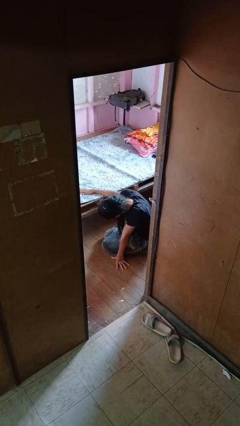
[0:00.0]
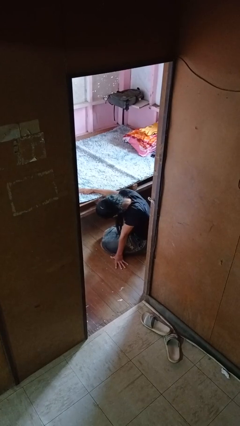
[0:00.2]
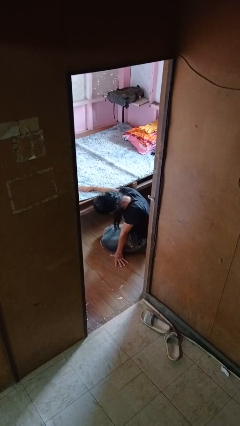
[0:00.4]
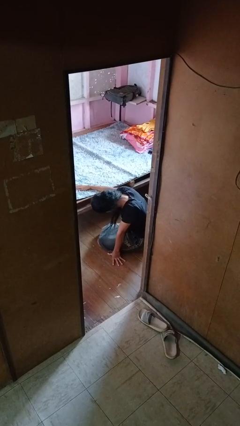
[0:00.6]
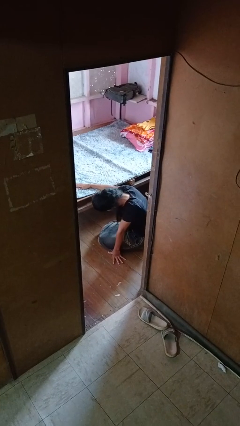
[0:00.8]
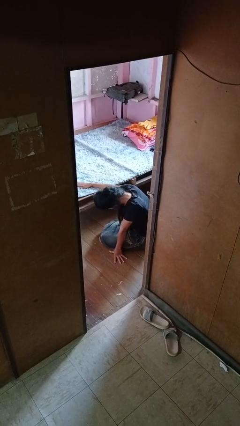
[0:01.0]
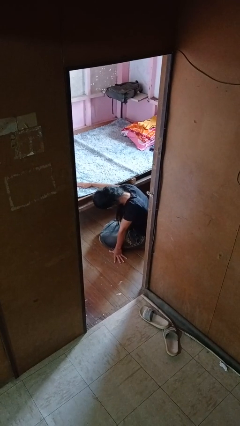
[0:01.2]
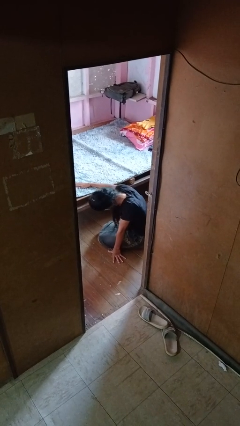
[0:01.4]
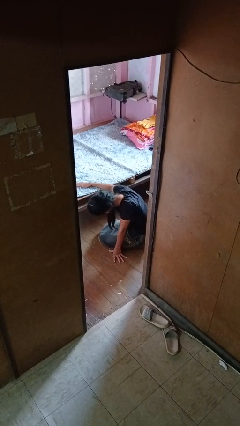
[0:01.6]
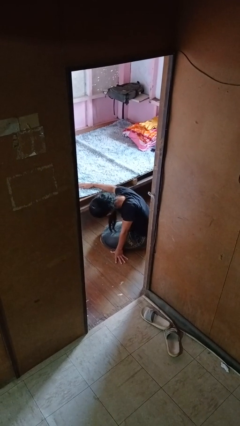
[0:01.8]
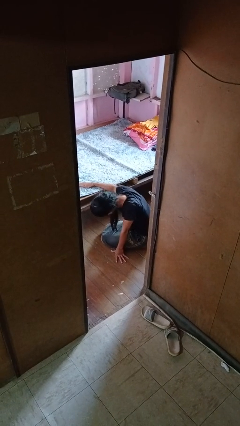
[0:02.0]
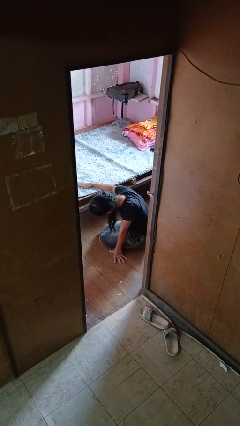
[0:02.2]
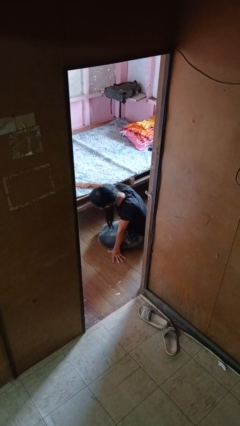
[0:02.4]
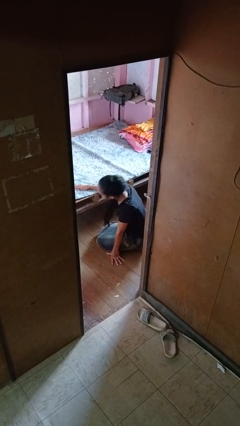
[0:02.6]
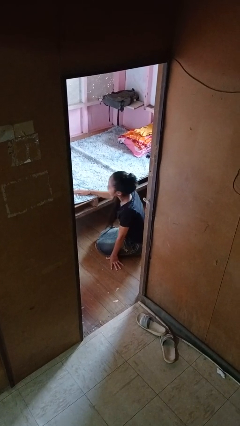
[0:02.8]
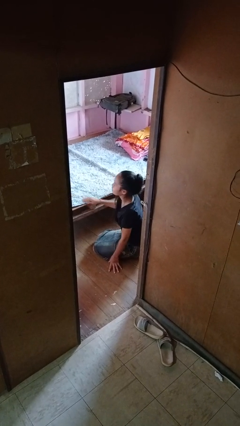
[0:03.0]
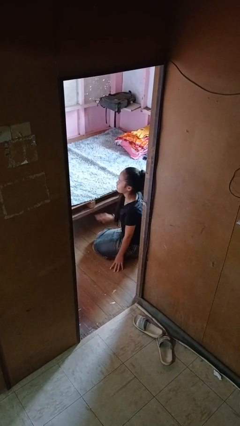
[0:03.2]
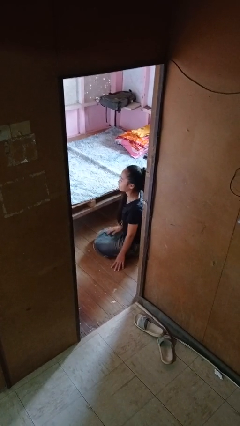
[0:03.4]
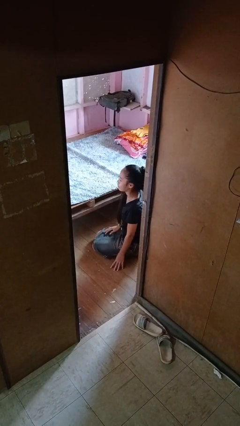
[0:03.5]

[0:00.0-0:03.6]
person searches under bed

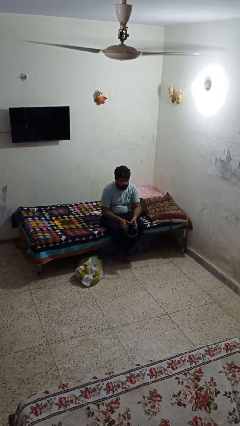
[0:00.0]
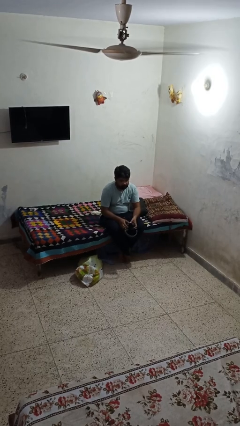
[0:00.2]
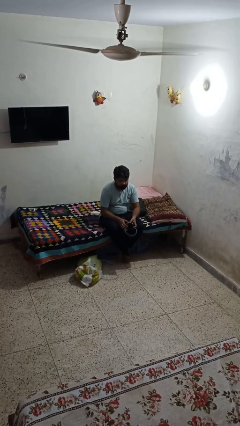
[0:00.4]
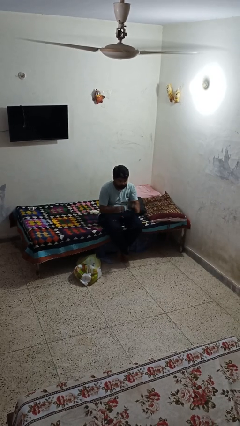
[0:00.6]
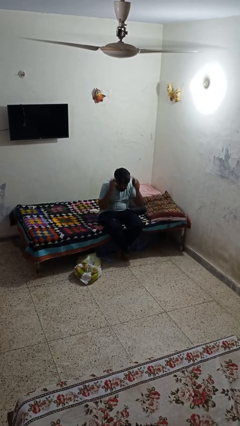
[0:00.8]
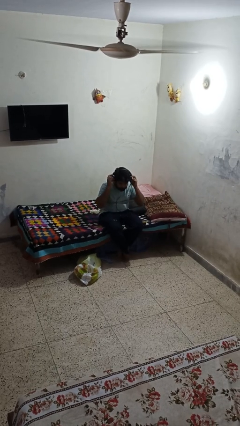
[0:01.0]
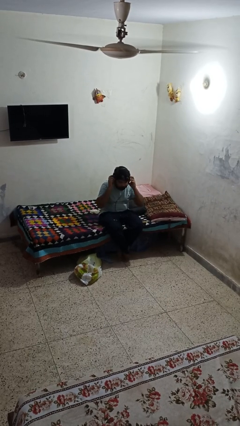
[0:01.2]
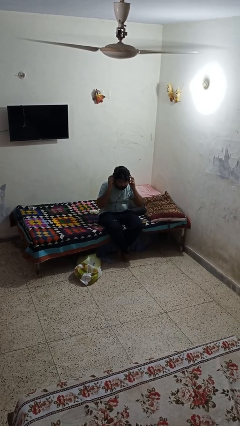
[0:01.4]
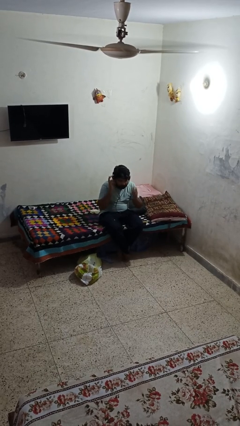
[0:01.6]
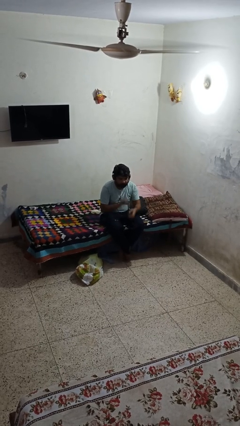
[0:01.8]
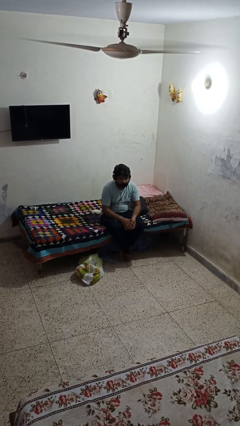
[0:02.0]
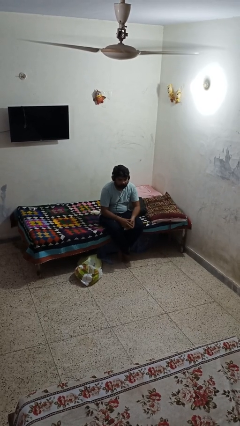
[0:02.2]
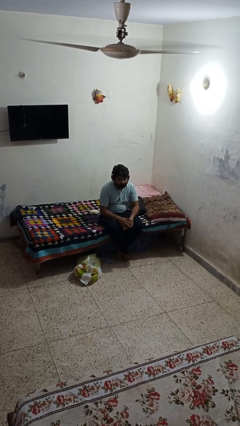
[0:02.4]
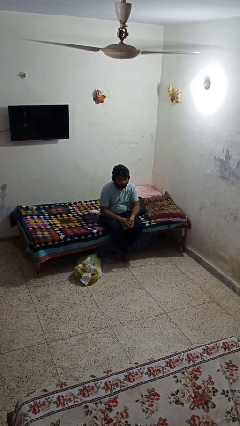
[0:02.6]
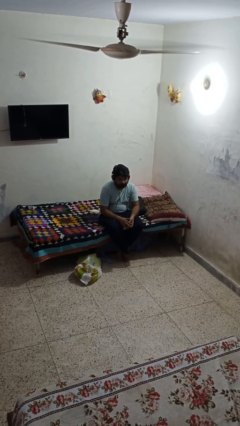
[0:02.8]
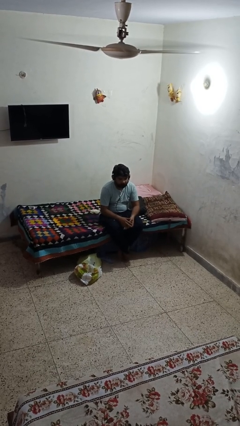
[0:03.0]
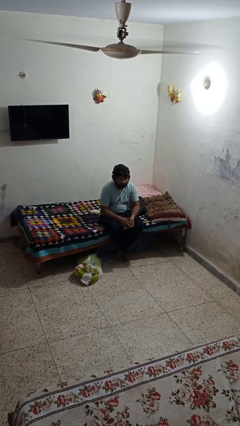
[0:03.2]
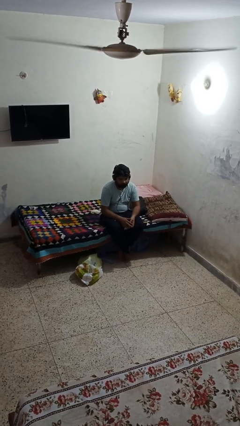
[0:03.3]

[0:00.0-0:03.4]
person puts on headphones

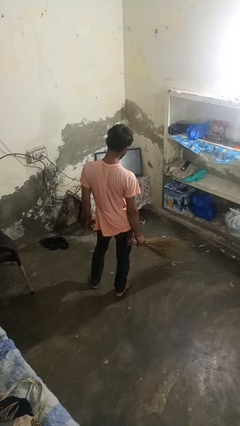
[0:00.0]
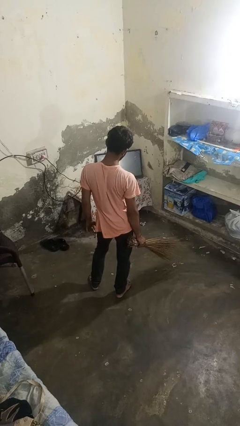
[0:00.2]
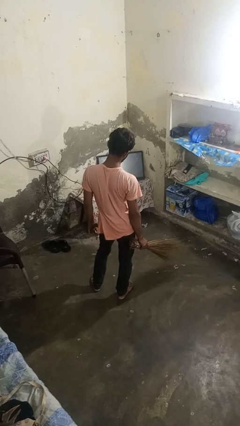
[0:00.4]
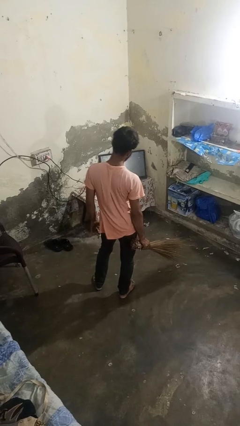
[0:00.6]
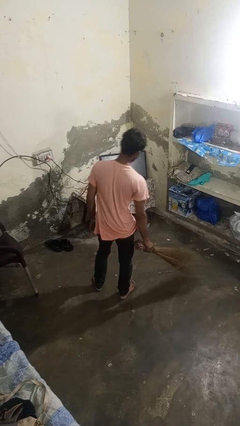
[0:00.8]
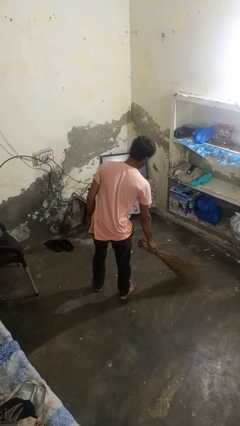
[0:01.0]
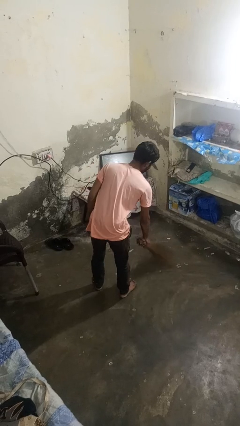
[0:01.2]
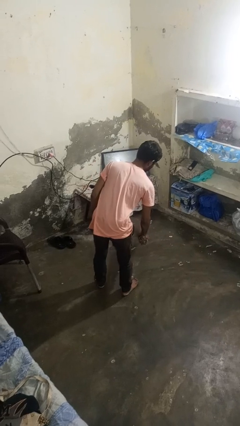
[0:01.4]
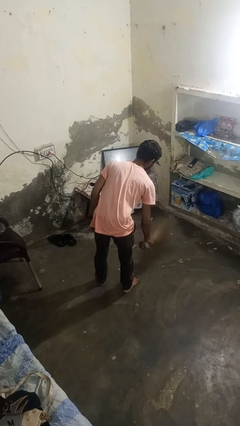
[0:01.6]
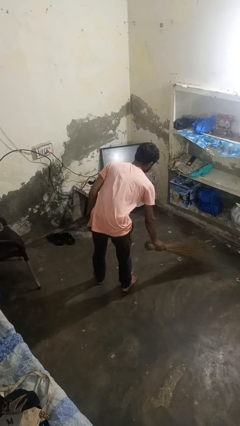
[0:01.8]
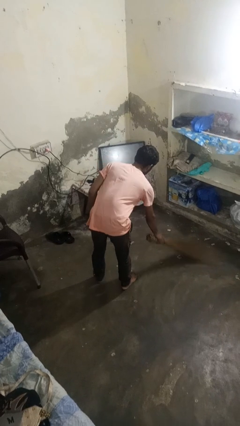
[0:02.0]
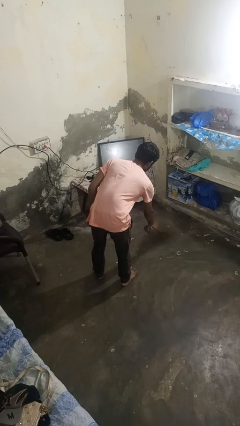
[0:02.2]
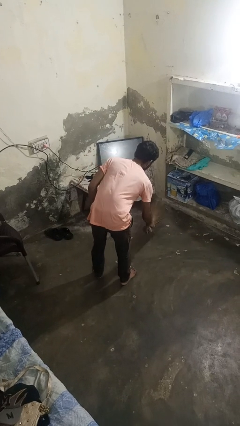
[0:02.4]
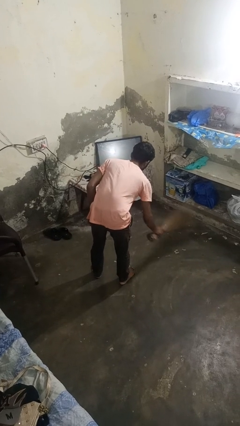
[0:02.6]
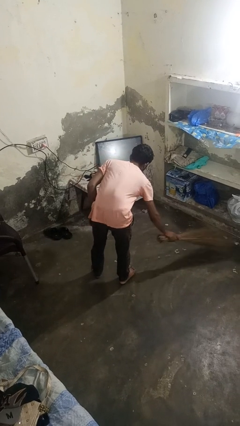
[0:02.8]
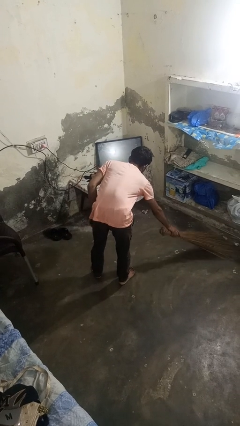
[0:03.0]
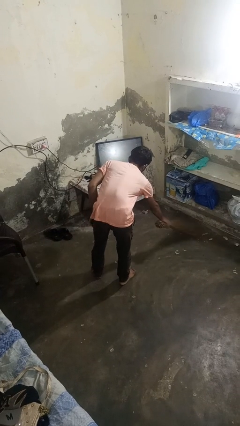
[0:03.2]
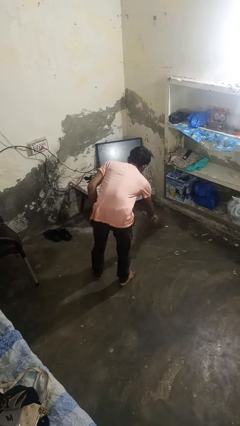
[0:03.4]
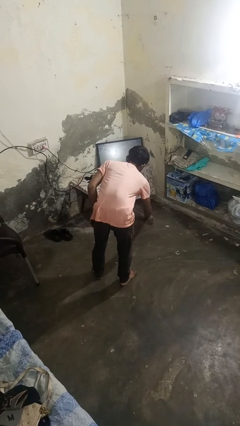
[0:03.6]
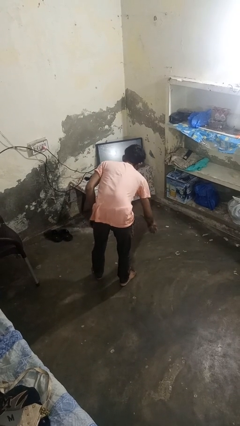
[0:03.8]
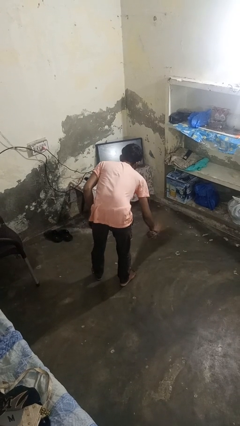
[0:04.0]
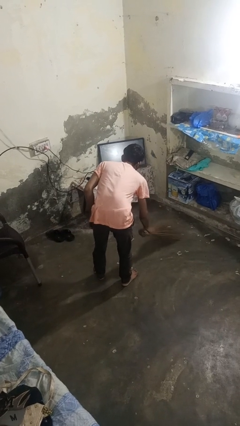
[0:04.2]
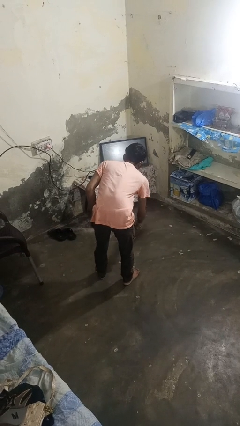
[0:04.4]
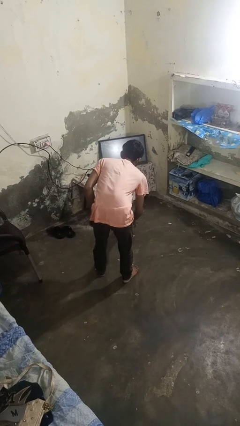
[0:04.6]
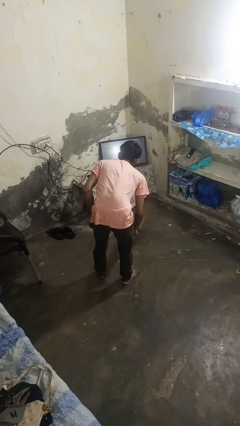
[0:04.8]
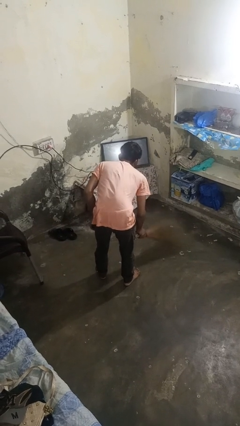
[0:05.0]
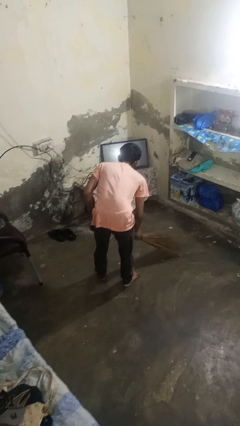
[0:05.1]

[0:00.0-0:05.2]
person sweeps floor

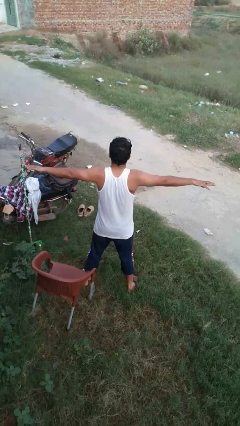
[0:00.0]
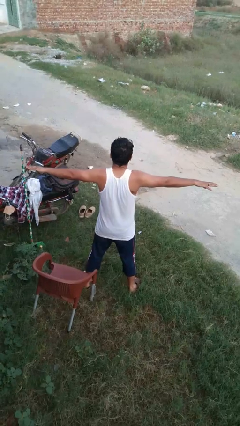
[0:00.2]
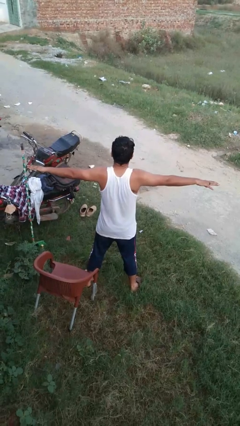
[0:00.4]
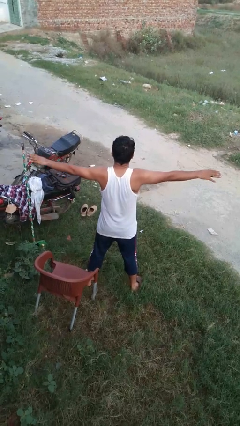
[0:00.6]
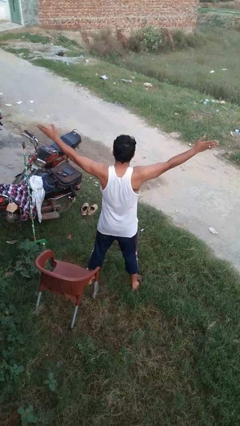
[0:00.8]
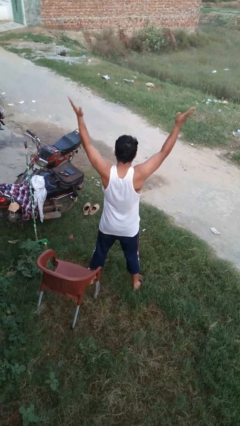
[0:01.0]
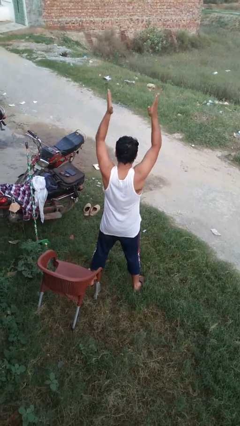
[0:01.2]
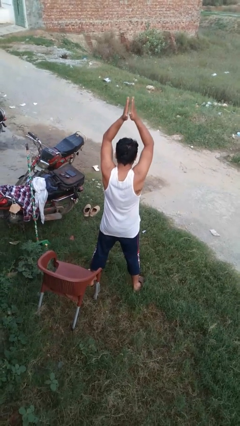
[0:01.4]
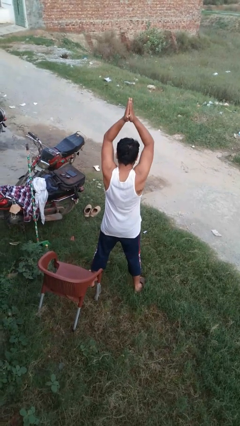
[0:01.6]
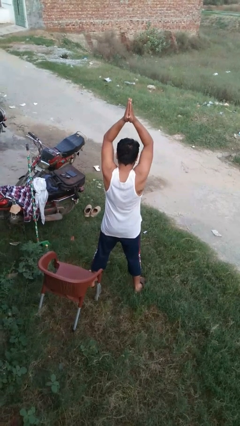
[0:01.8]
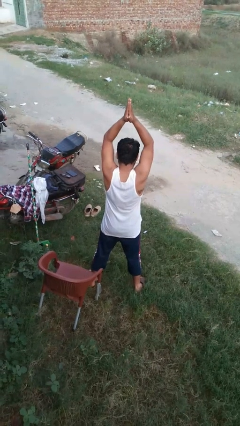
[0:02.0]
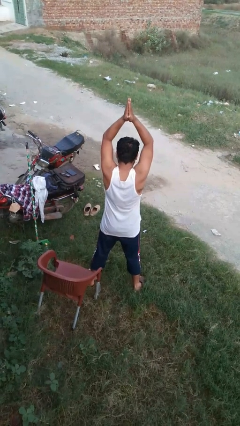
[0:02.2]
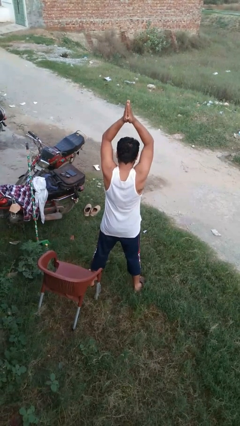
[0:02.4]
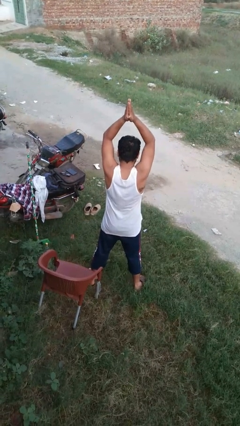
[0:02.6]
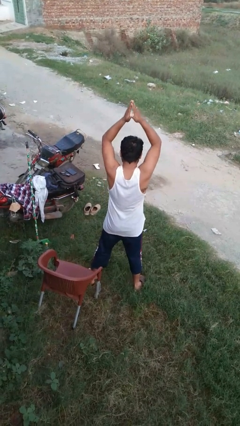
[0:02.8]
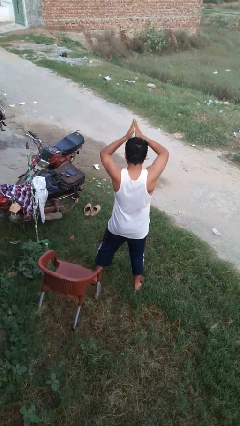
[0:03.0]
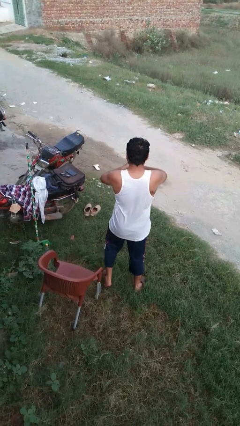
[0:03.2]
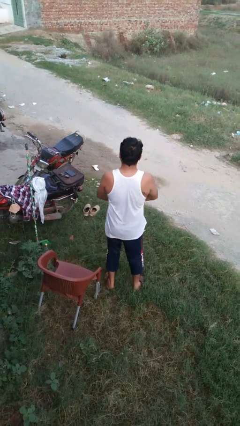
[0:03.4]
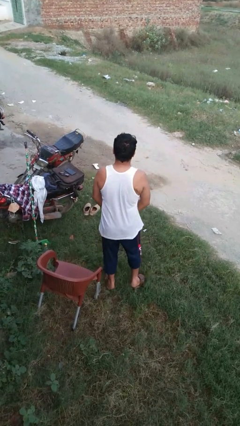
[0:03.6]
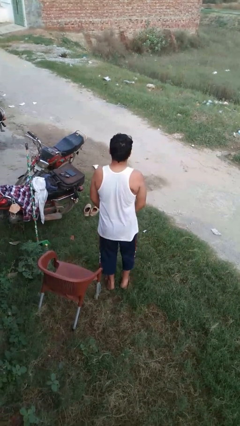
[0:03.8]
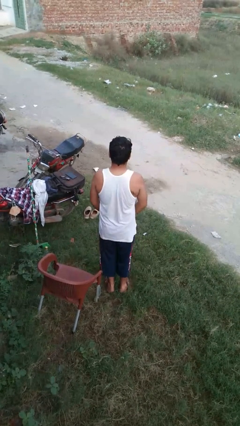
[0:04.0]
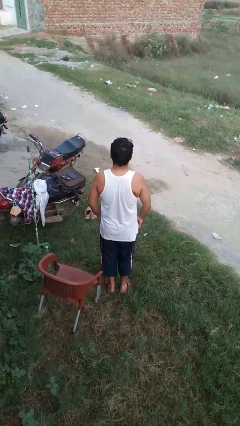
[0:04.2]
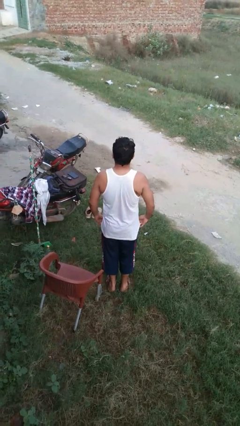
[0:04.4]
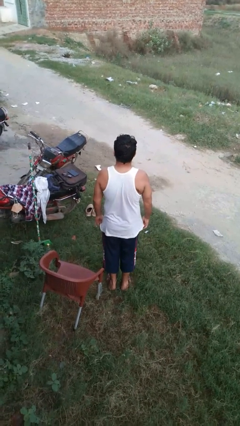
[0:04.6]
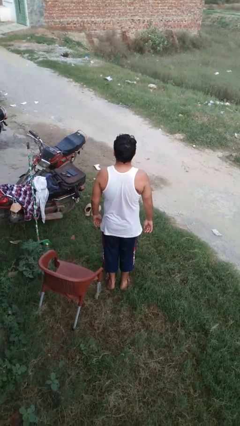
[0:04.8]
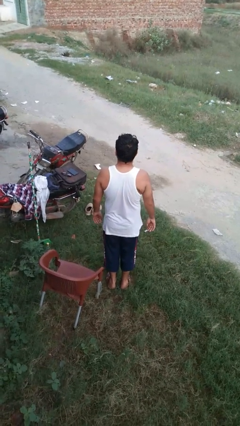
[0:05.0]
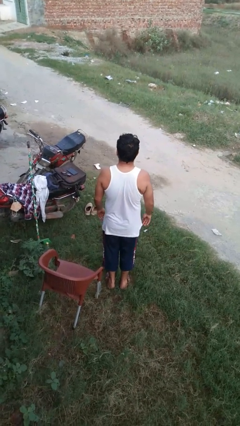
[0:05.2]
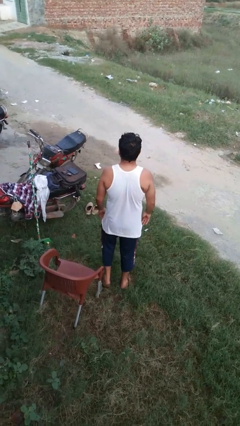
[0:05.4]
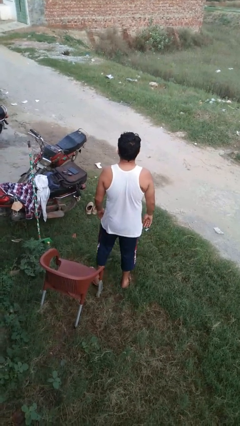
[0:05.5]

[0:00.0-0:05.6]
person stretches arms over head
